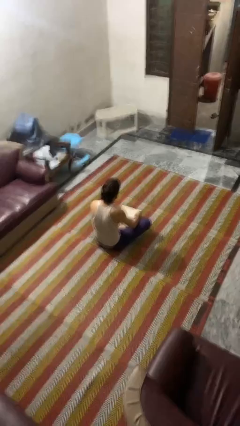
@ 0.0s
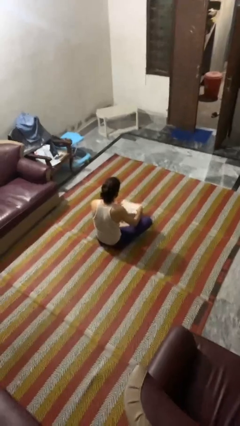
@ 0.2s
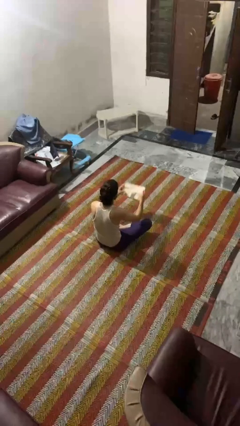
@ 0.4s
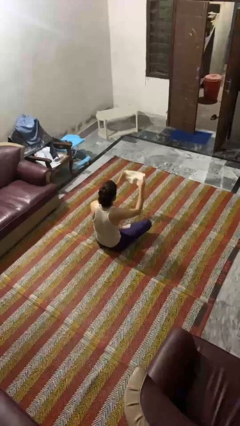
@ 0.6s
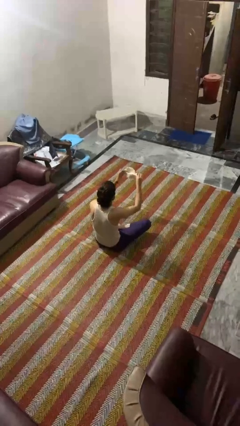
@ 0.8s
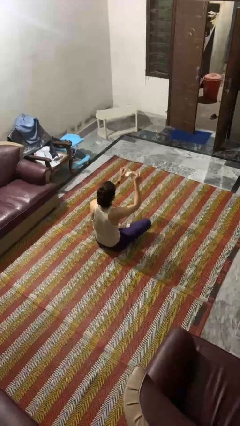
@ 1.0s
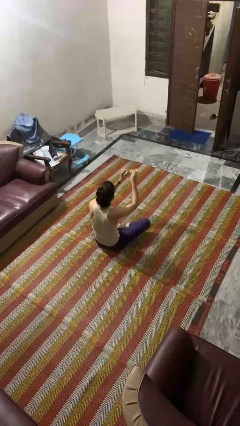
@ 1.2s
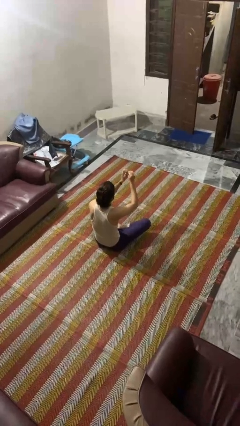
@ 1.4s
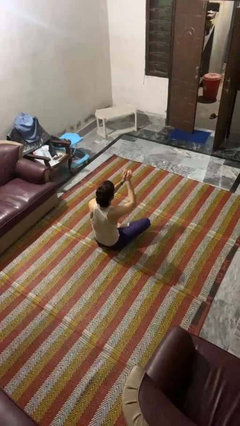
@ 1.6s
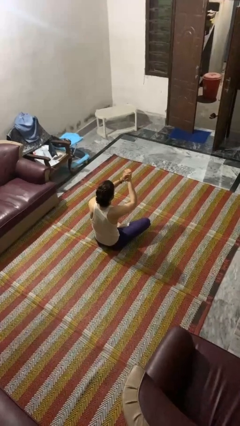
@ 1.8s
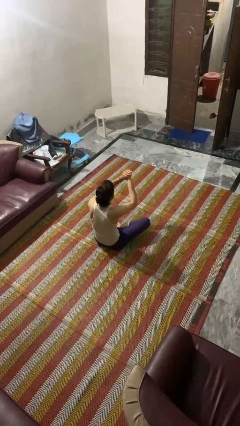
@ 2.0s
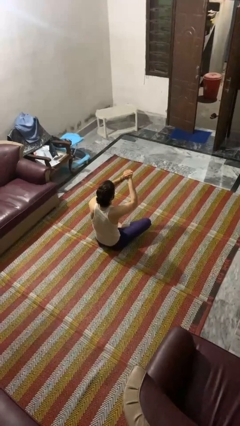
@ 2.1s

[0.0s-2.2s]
person crumples paper

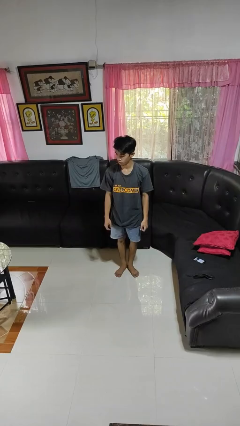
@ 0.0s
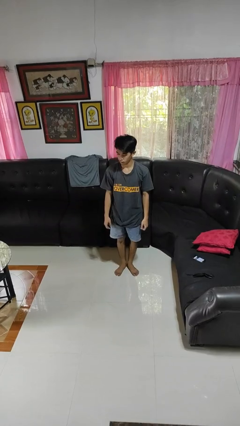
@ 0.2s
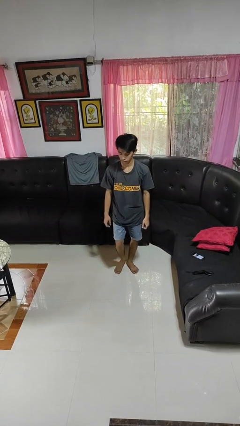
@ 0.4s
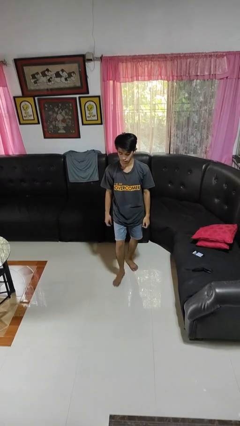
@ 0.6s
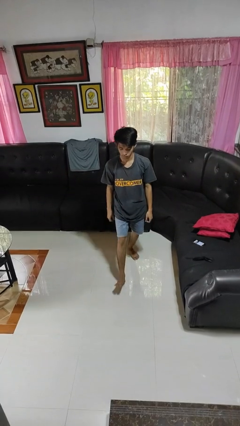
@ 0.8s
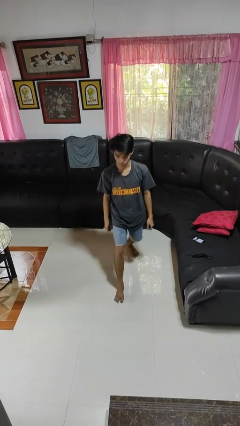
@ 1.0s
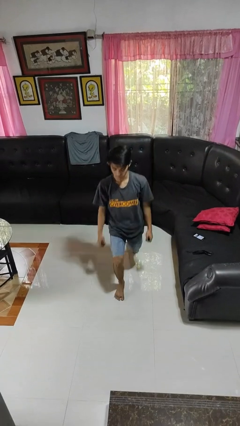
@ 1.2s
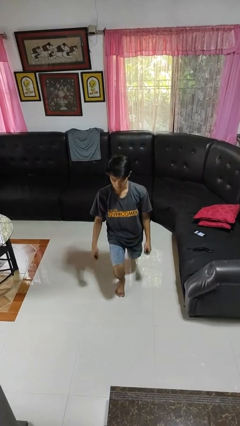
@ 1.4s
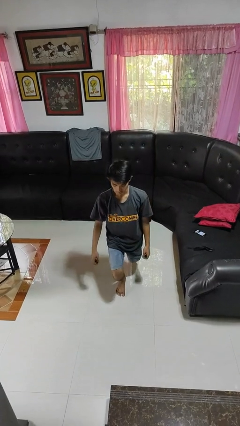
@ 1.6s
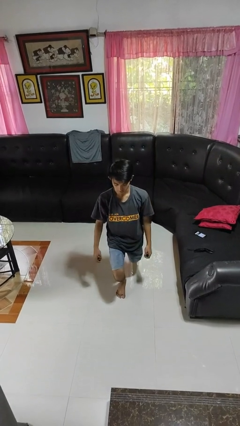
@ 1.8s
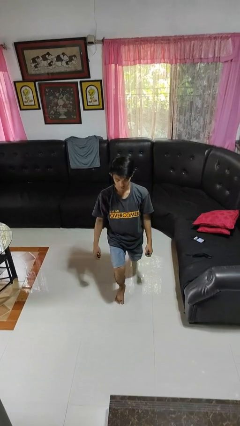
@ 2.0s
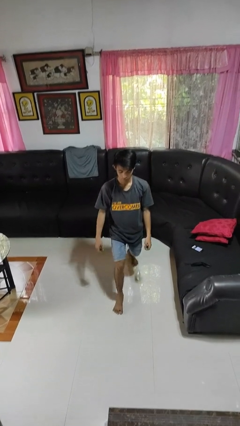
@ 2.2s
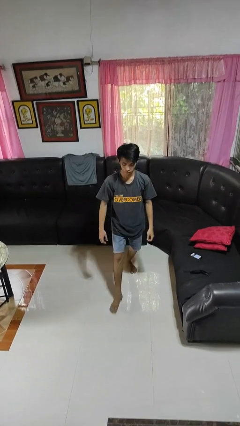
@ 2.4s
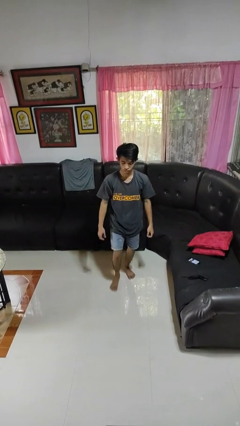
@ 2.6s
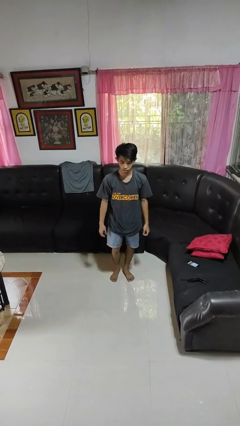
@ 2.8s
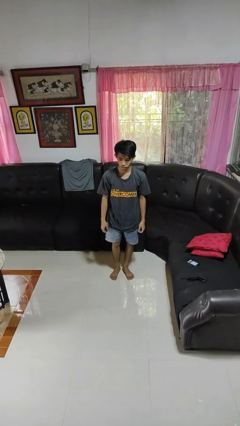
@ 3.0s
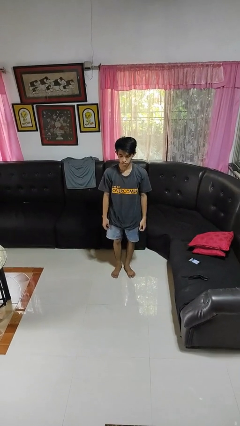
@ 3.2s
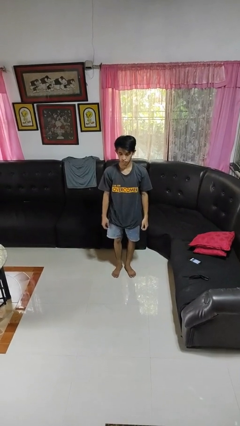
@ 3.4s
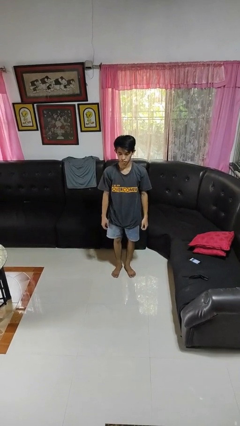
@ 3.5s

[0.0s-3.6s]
person exercises with lunges

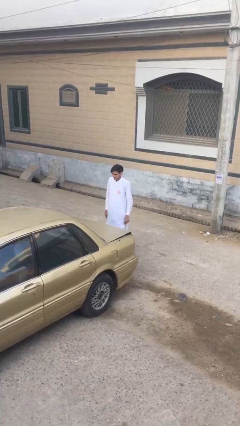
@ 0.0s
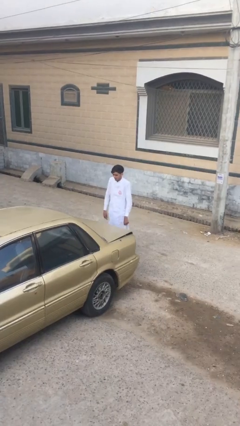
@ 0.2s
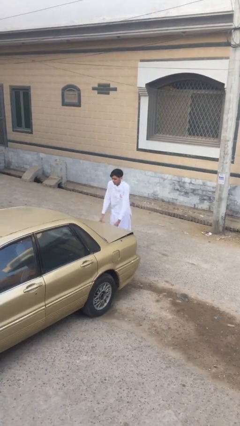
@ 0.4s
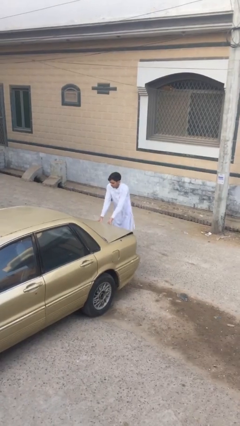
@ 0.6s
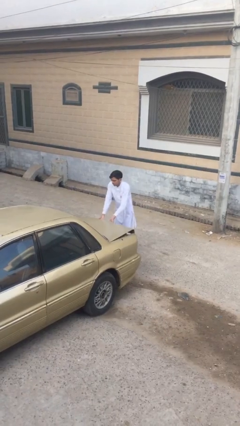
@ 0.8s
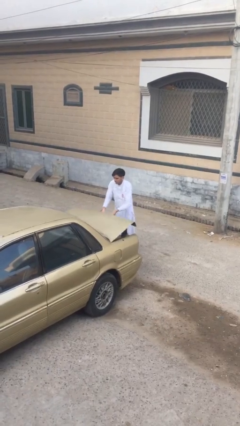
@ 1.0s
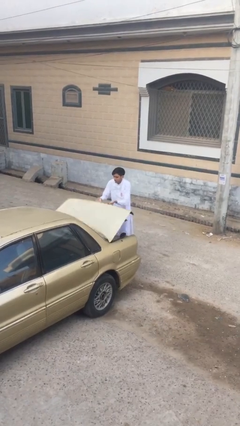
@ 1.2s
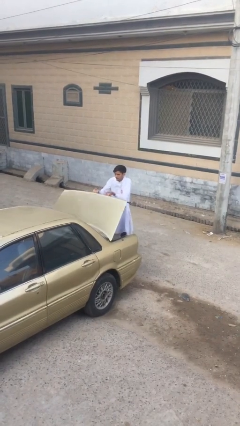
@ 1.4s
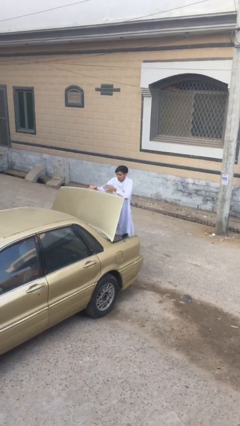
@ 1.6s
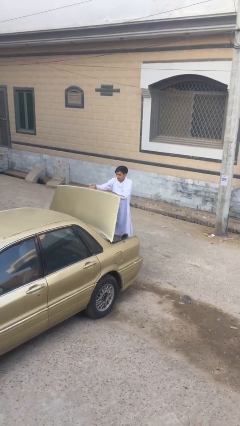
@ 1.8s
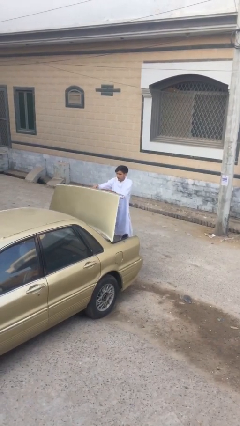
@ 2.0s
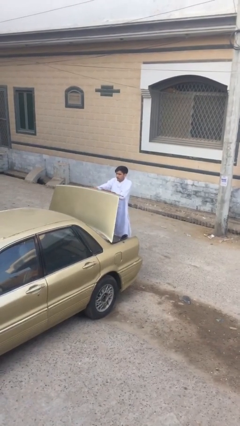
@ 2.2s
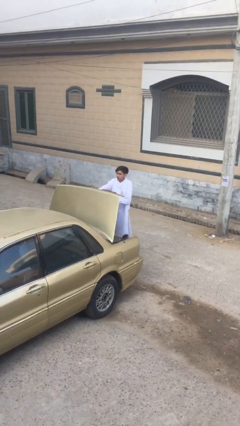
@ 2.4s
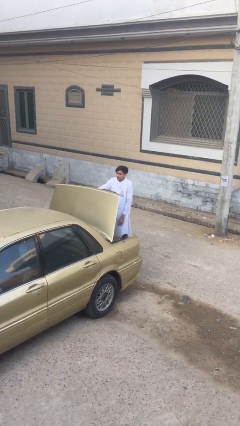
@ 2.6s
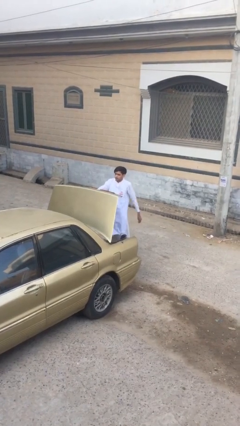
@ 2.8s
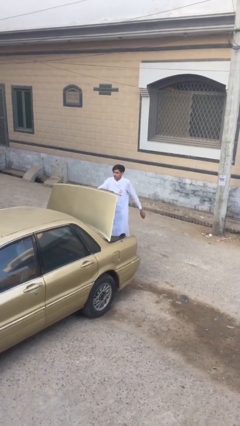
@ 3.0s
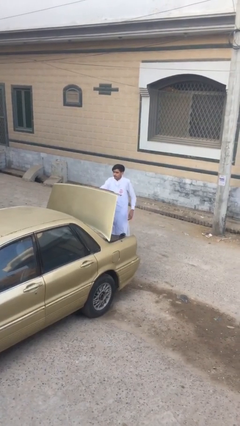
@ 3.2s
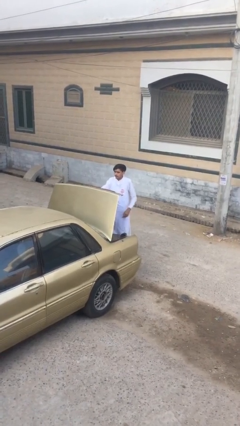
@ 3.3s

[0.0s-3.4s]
person opens car trunk

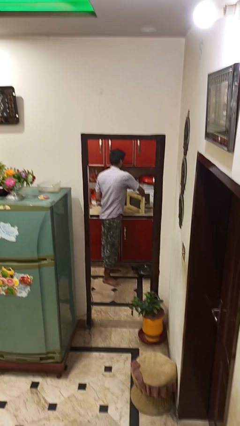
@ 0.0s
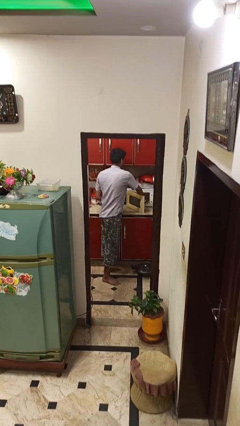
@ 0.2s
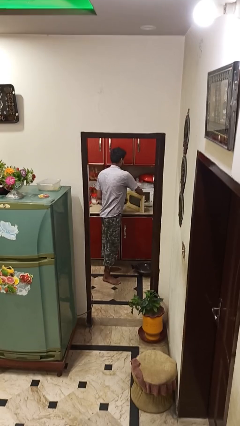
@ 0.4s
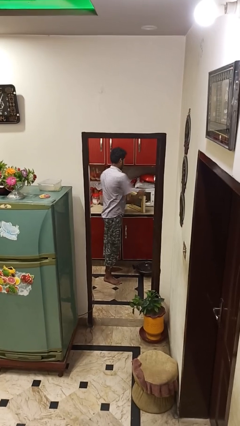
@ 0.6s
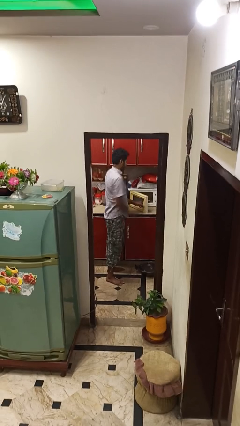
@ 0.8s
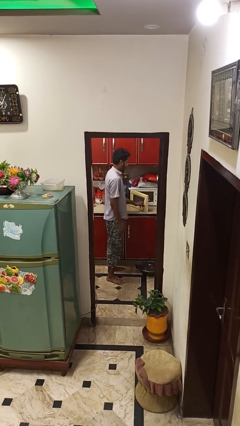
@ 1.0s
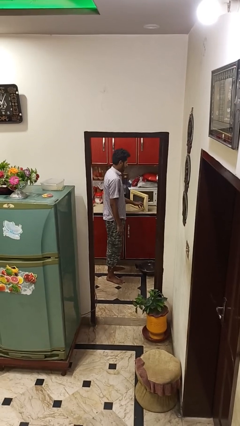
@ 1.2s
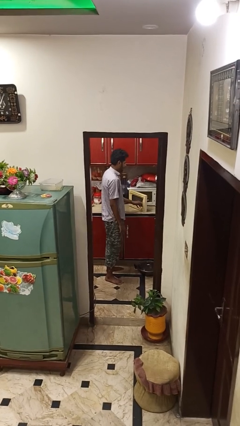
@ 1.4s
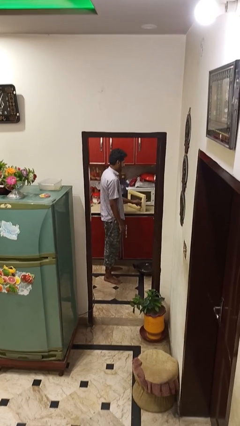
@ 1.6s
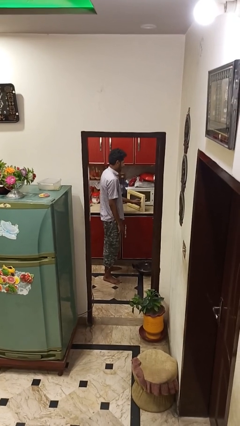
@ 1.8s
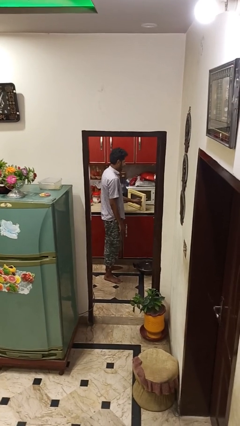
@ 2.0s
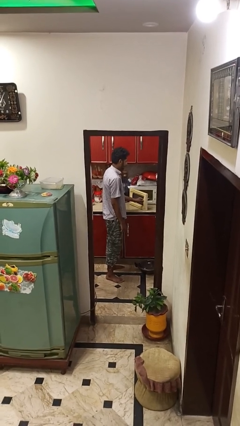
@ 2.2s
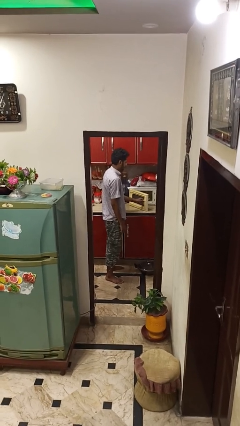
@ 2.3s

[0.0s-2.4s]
person puts object into microwave

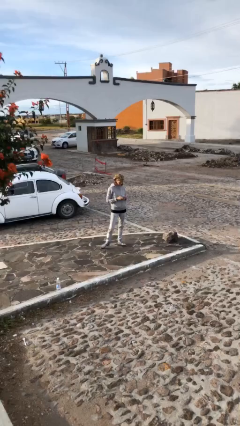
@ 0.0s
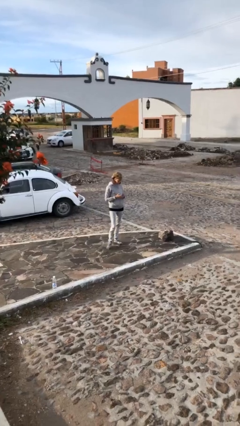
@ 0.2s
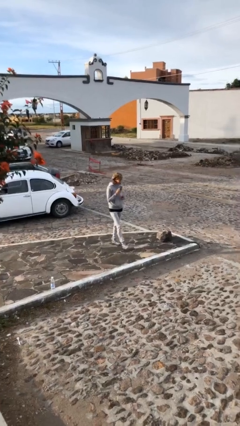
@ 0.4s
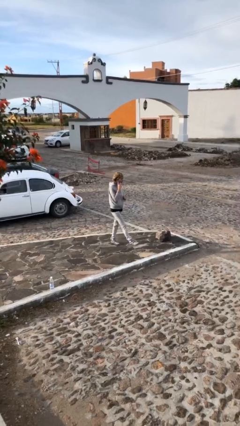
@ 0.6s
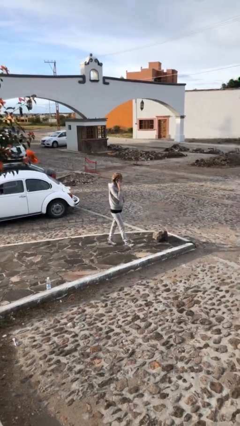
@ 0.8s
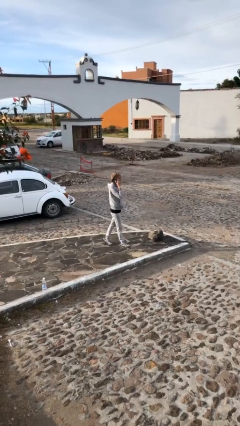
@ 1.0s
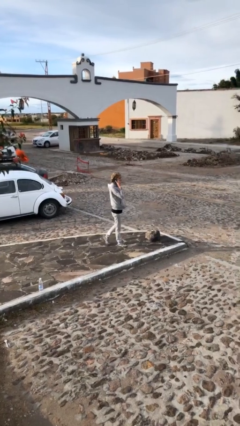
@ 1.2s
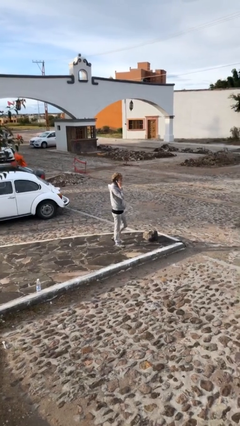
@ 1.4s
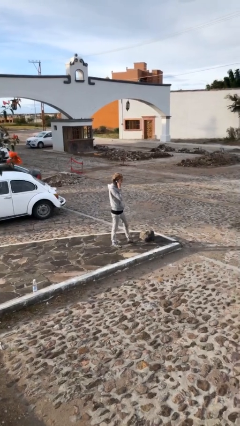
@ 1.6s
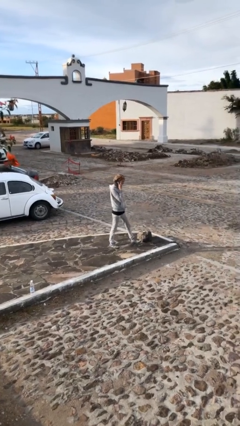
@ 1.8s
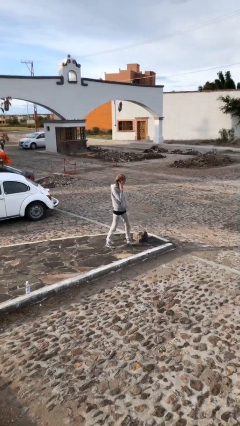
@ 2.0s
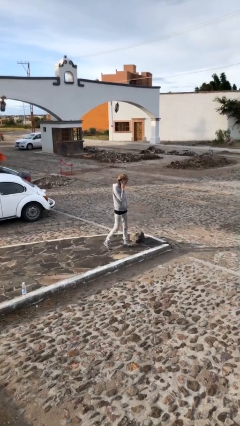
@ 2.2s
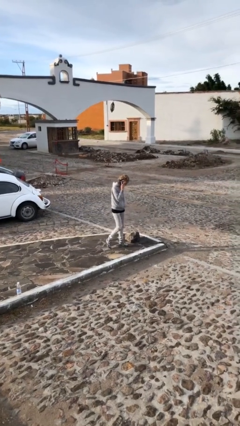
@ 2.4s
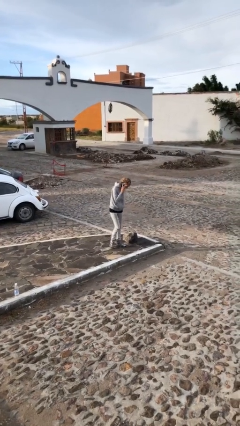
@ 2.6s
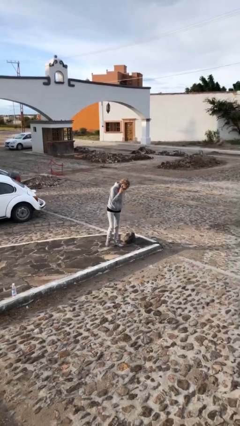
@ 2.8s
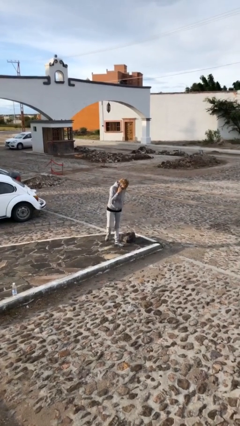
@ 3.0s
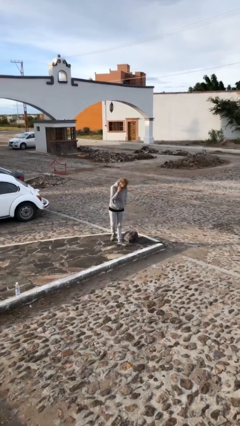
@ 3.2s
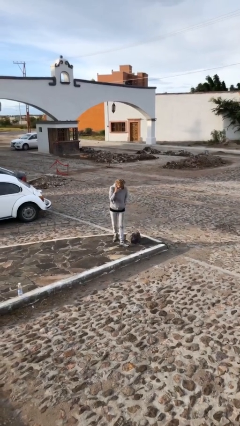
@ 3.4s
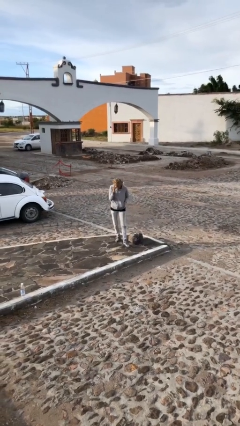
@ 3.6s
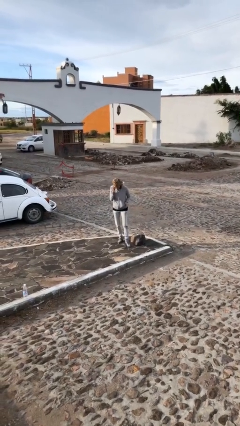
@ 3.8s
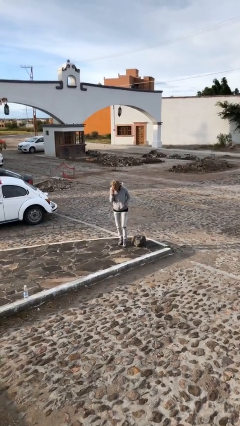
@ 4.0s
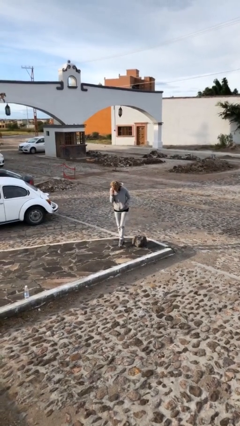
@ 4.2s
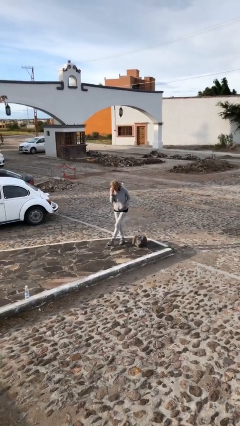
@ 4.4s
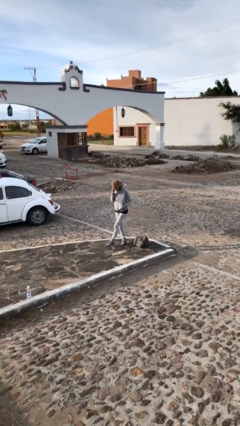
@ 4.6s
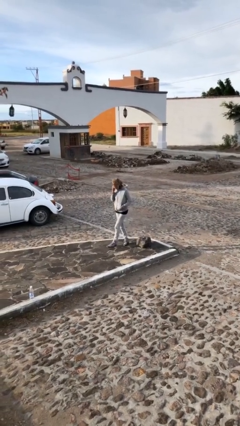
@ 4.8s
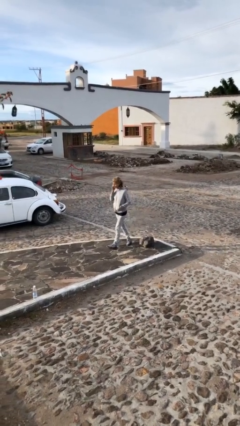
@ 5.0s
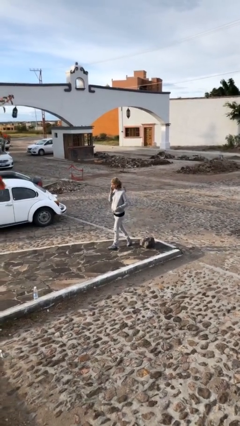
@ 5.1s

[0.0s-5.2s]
person talks on phone

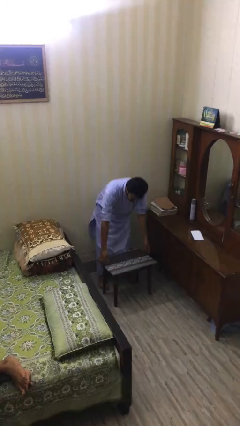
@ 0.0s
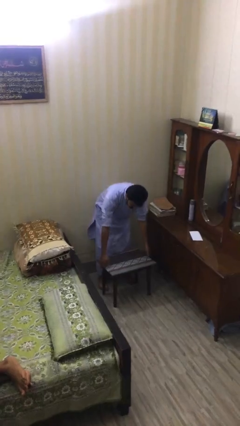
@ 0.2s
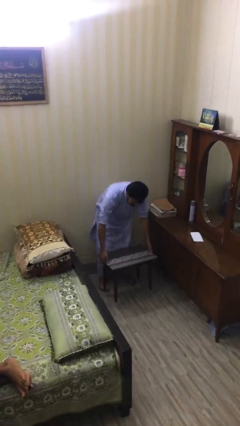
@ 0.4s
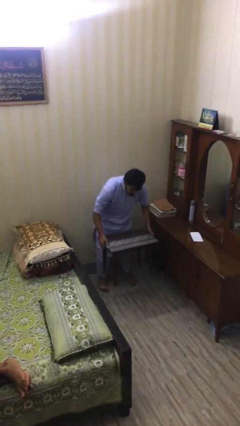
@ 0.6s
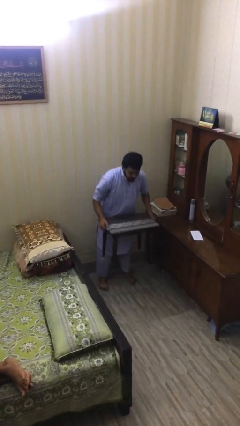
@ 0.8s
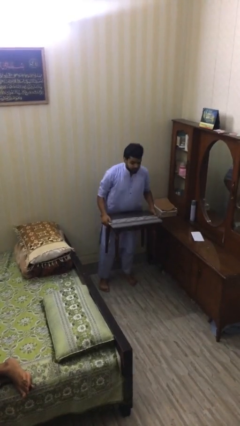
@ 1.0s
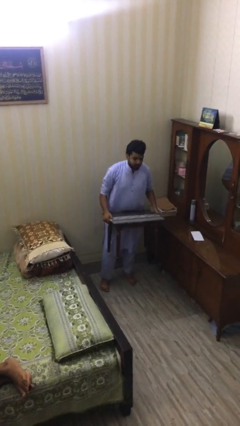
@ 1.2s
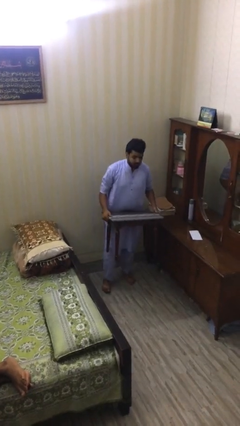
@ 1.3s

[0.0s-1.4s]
person picks up object from floor
